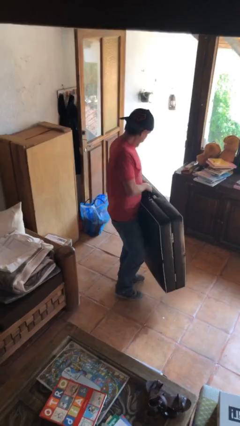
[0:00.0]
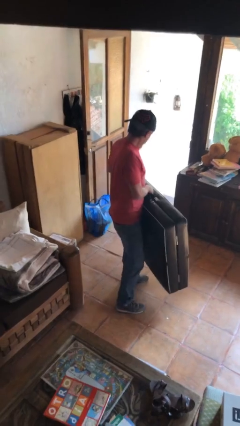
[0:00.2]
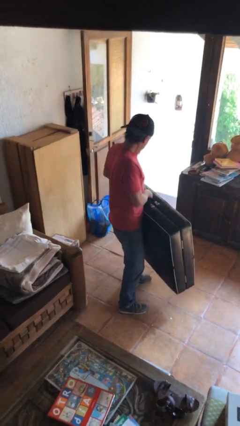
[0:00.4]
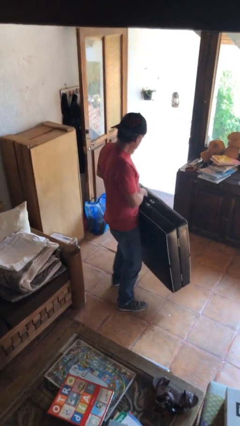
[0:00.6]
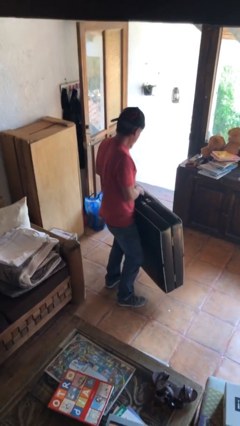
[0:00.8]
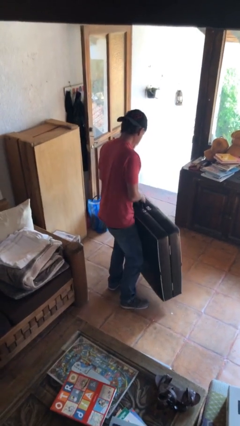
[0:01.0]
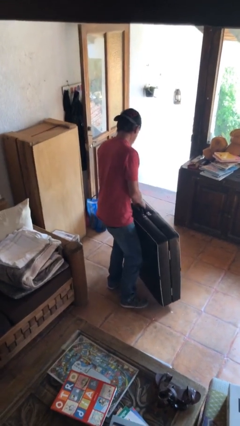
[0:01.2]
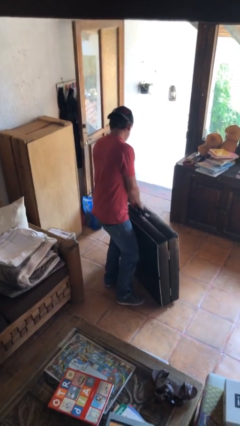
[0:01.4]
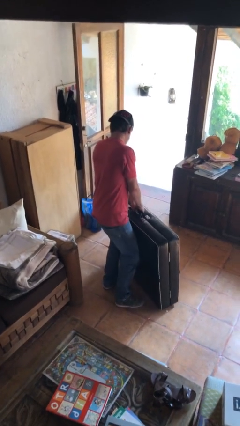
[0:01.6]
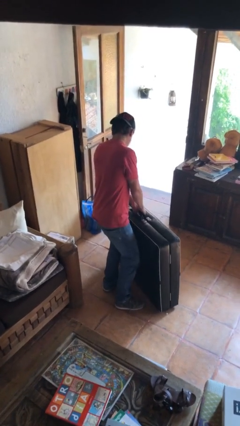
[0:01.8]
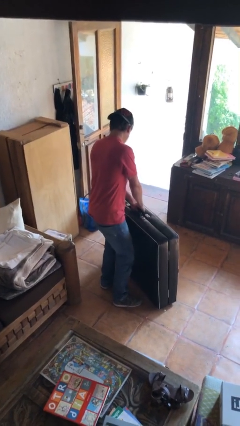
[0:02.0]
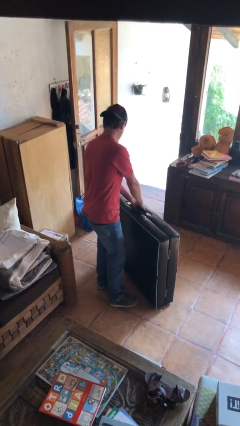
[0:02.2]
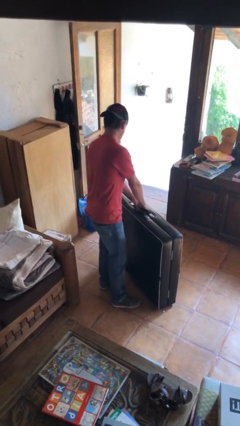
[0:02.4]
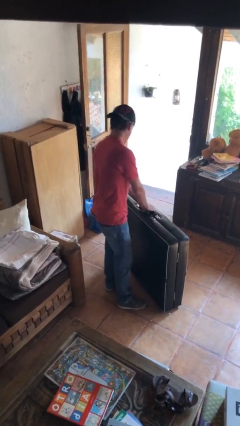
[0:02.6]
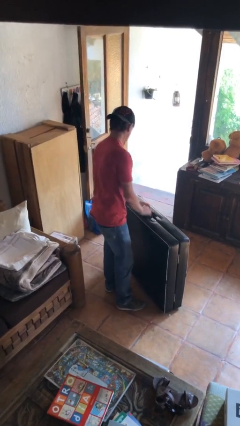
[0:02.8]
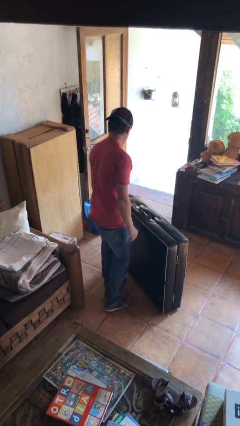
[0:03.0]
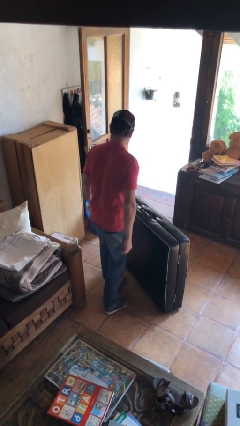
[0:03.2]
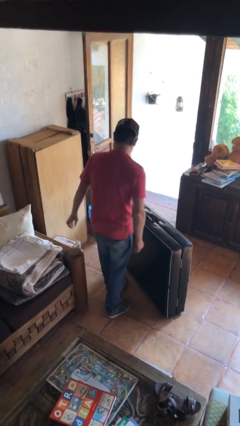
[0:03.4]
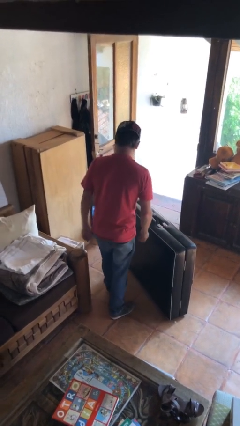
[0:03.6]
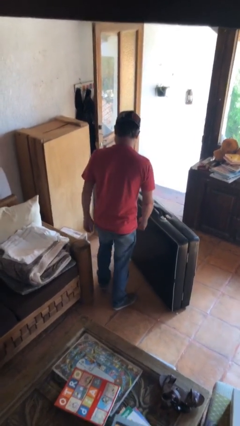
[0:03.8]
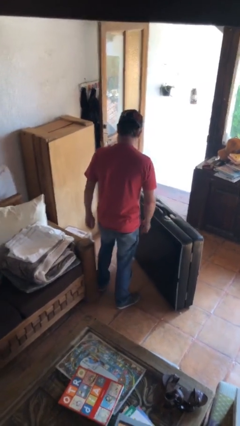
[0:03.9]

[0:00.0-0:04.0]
person puts down object on floor

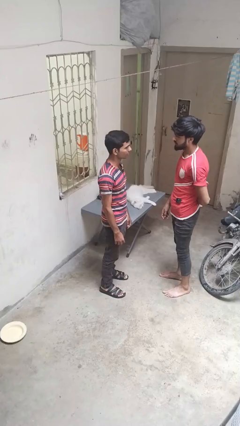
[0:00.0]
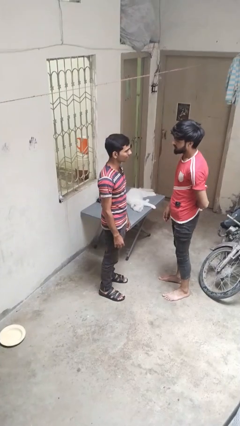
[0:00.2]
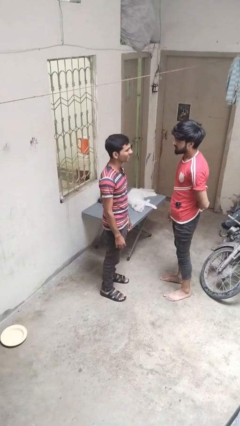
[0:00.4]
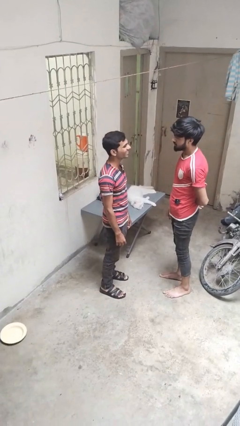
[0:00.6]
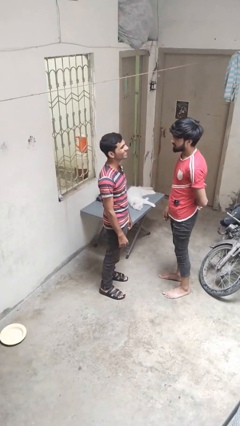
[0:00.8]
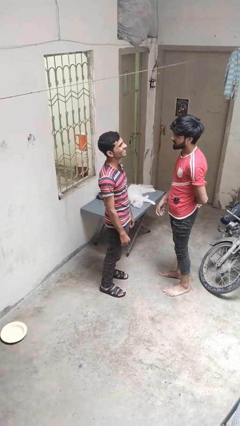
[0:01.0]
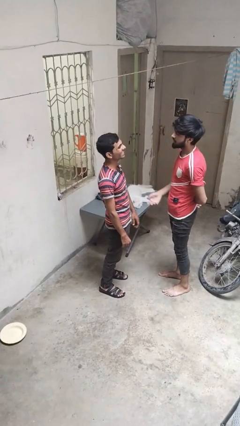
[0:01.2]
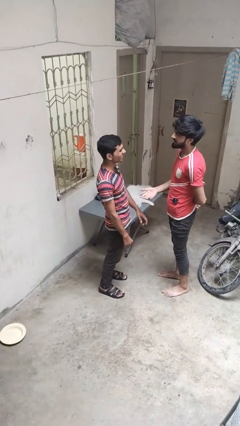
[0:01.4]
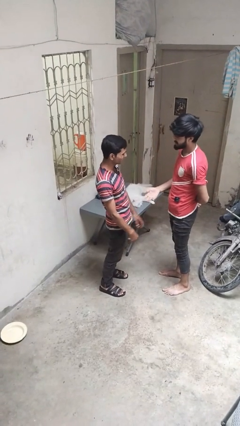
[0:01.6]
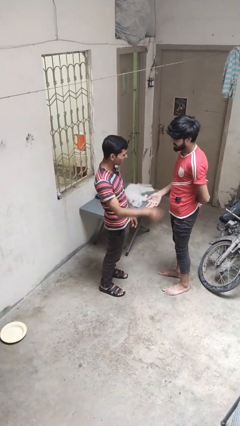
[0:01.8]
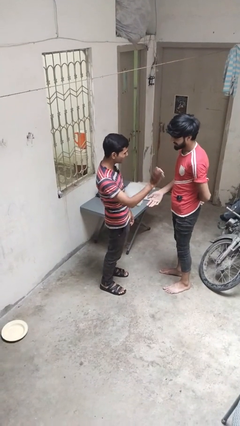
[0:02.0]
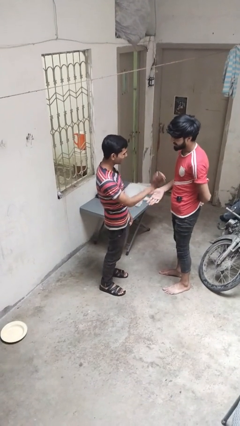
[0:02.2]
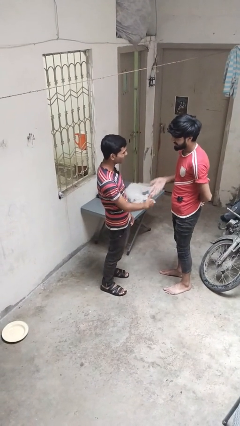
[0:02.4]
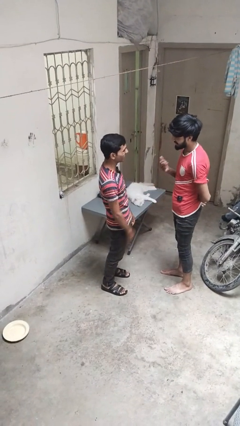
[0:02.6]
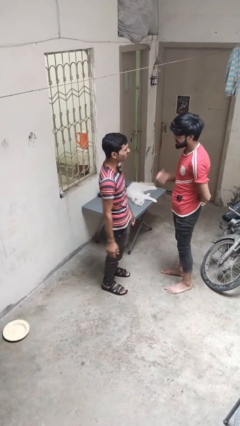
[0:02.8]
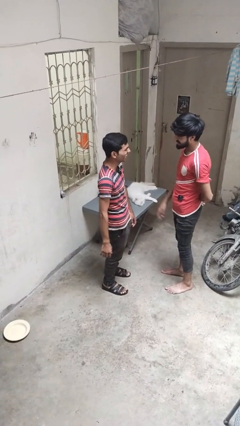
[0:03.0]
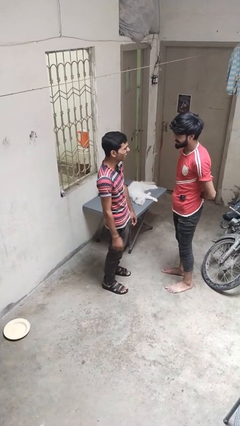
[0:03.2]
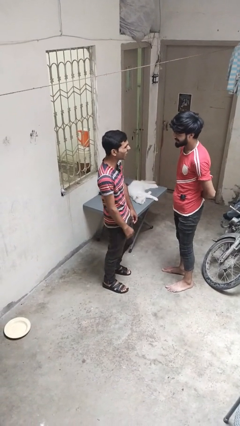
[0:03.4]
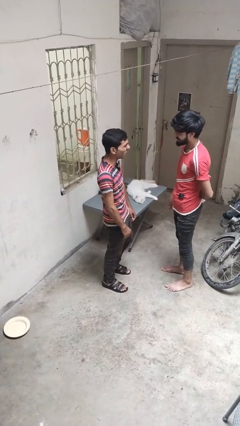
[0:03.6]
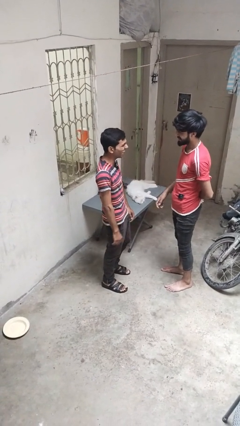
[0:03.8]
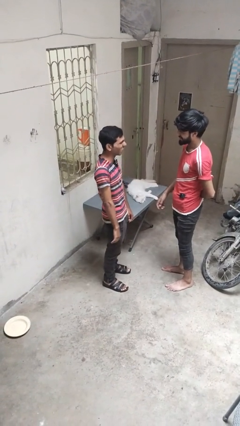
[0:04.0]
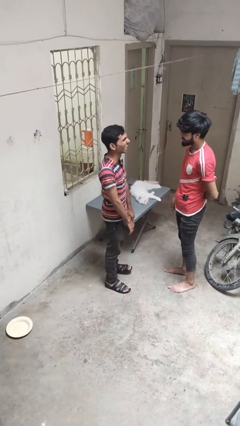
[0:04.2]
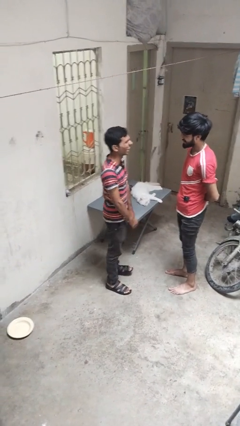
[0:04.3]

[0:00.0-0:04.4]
person laughs with person

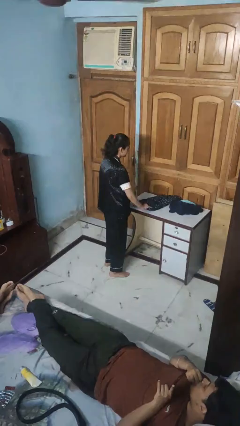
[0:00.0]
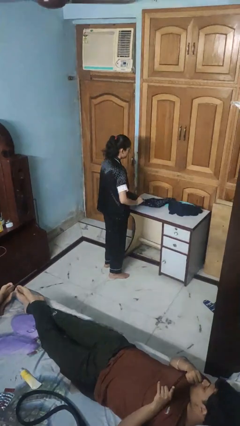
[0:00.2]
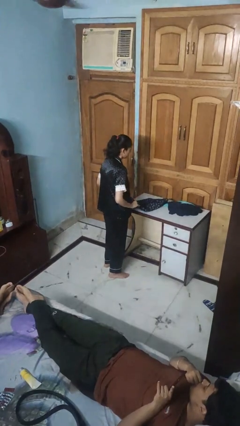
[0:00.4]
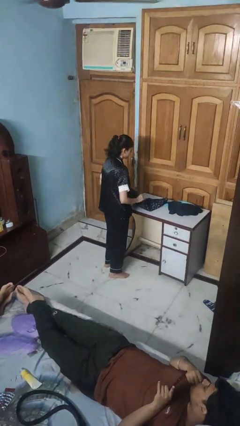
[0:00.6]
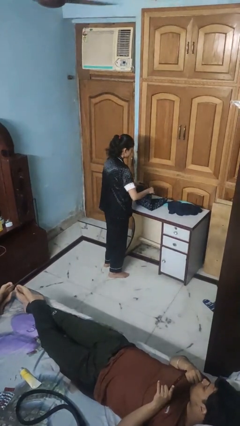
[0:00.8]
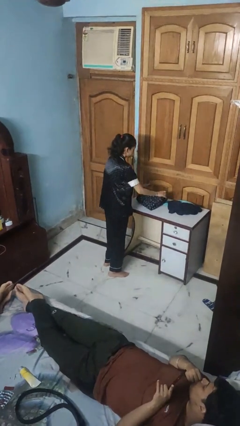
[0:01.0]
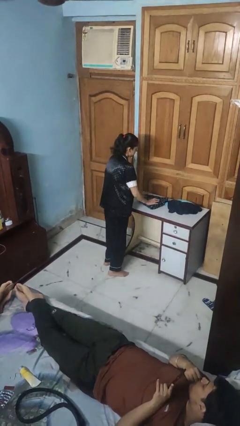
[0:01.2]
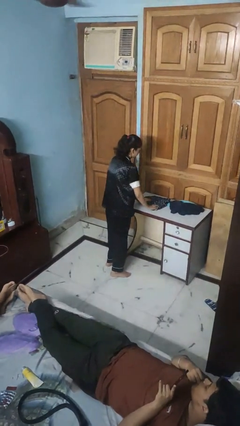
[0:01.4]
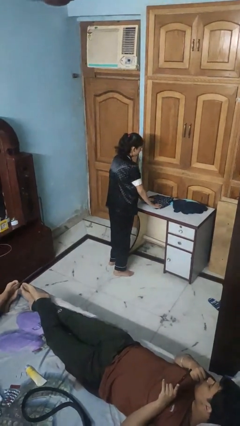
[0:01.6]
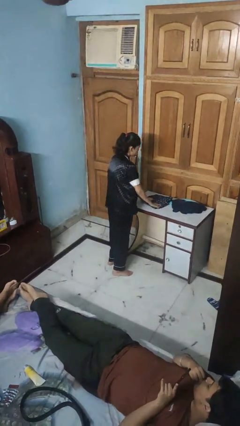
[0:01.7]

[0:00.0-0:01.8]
person folds shirt

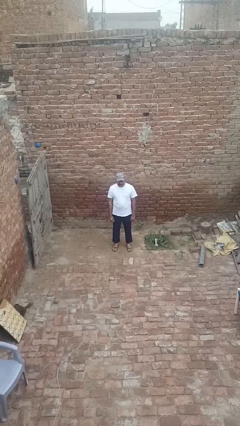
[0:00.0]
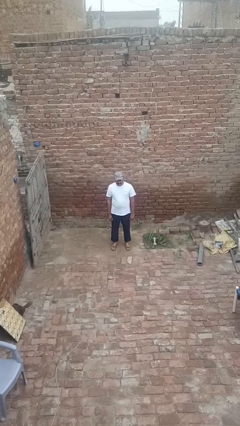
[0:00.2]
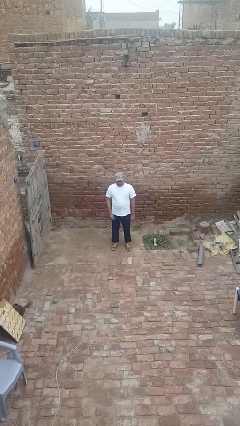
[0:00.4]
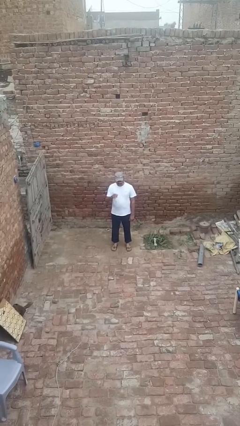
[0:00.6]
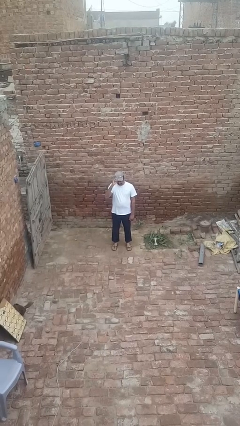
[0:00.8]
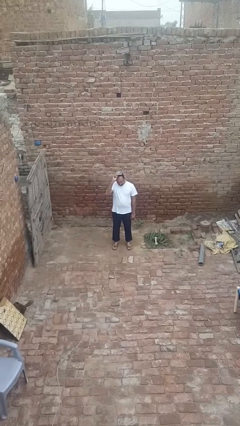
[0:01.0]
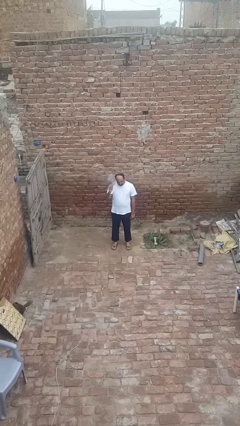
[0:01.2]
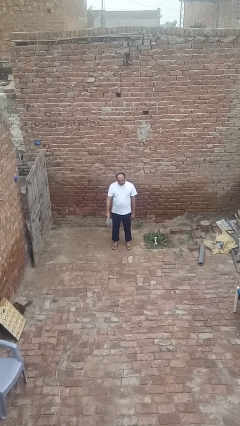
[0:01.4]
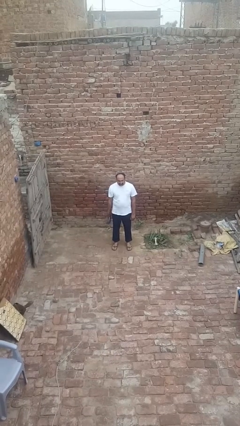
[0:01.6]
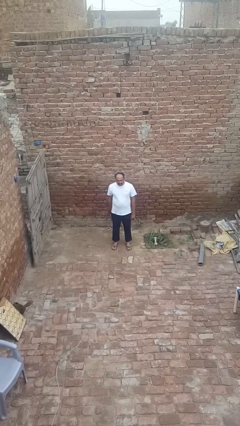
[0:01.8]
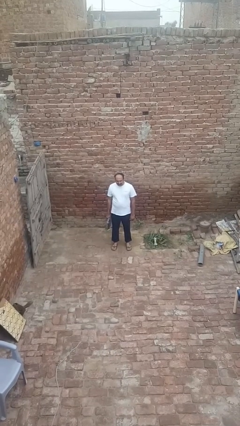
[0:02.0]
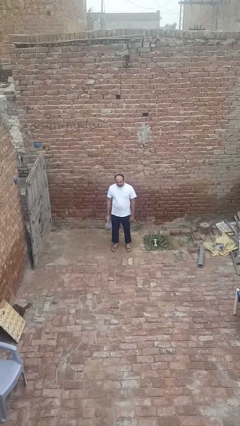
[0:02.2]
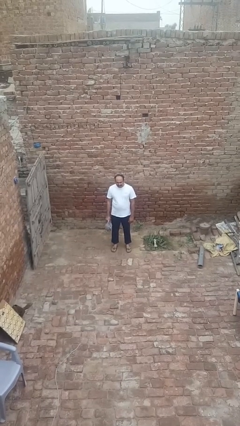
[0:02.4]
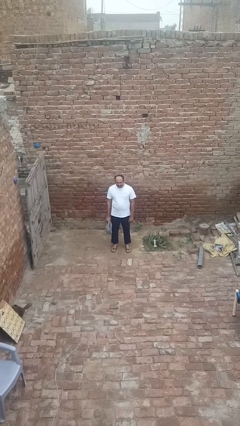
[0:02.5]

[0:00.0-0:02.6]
person takes off hat

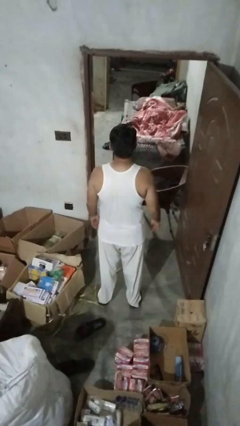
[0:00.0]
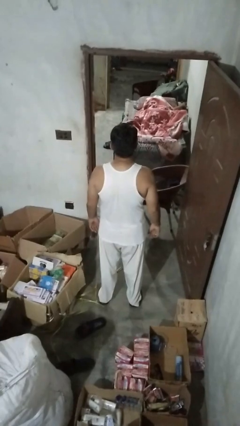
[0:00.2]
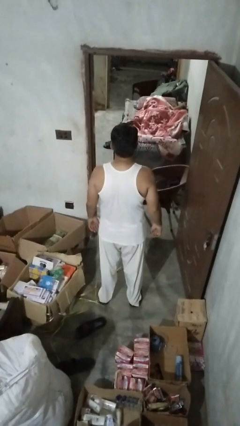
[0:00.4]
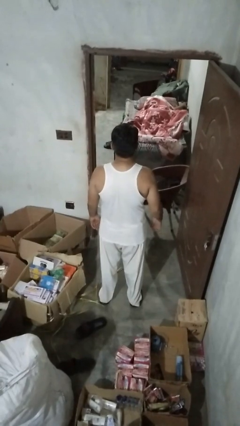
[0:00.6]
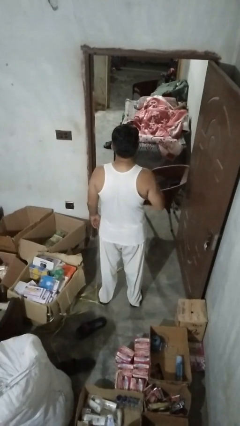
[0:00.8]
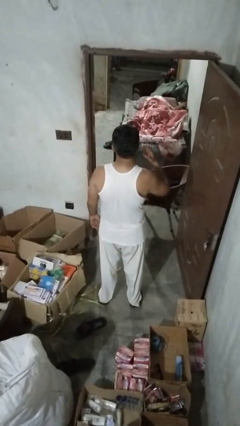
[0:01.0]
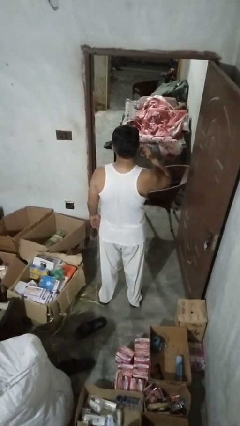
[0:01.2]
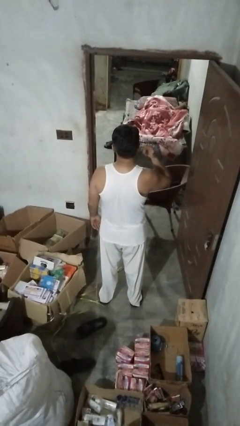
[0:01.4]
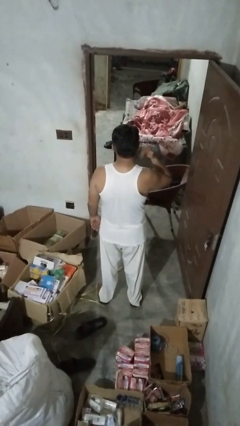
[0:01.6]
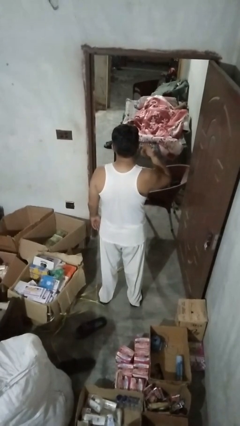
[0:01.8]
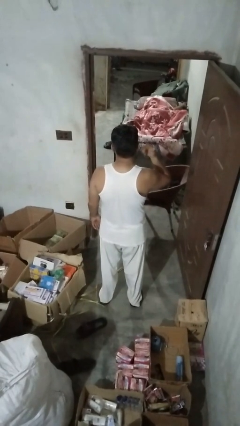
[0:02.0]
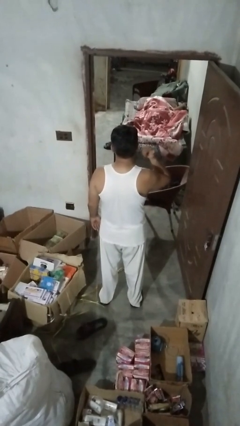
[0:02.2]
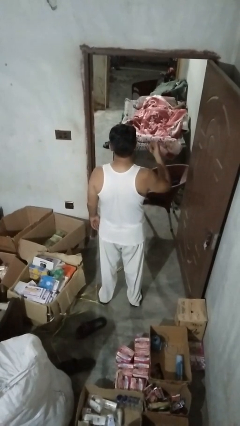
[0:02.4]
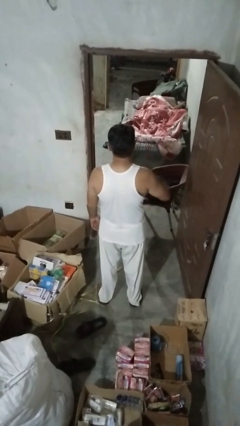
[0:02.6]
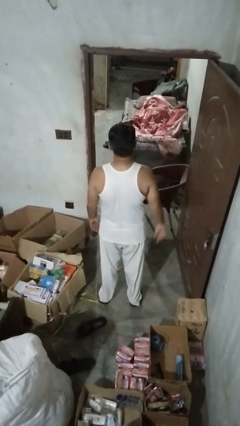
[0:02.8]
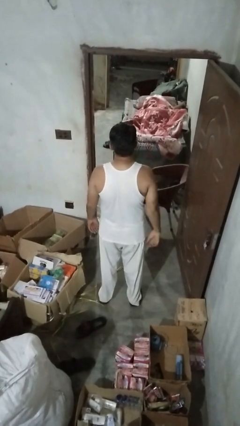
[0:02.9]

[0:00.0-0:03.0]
person touches earlobe

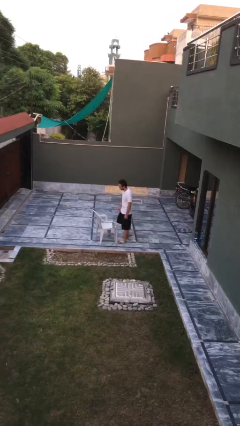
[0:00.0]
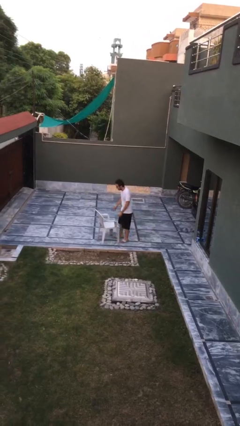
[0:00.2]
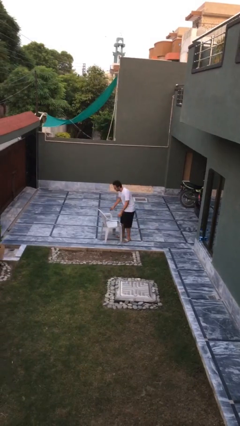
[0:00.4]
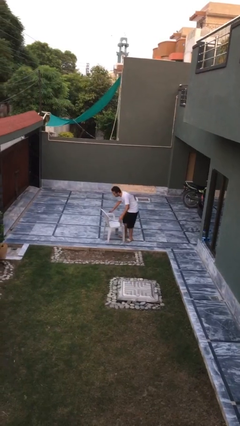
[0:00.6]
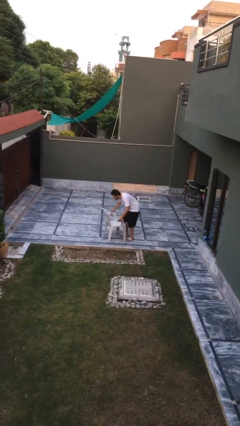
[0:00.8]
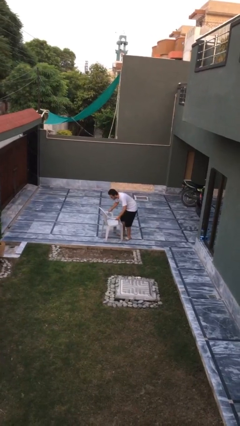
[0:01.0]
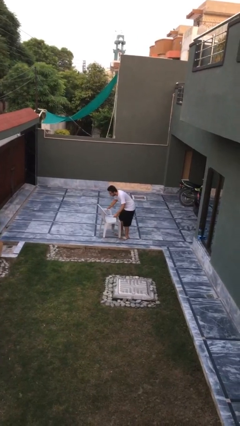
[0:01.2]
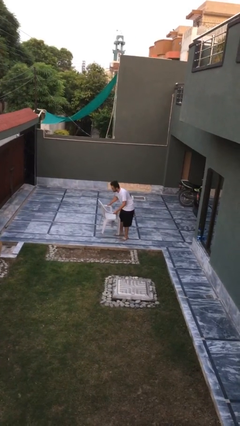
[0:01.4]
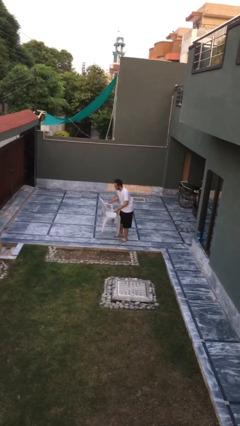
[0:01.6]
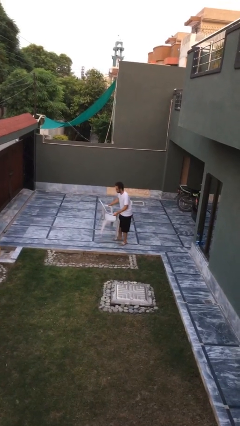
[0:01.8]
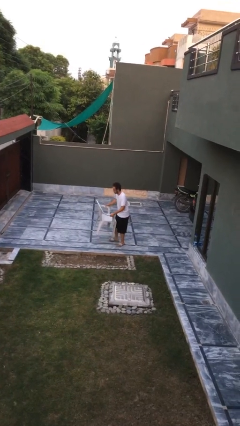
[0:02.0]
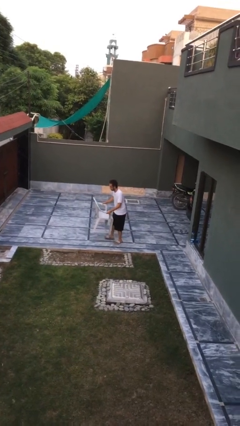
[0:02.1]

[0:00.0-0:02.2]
person picks up object from floor
